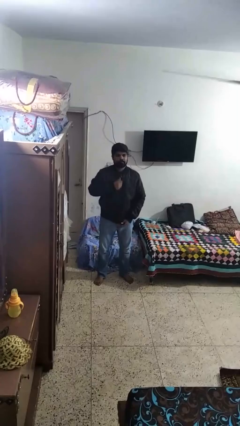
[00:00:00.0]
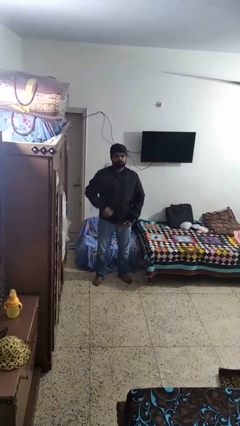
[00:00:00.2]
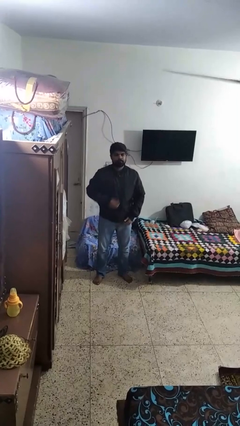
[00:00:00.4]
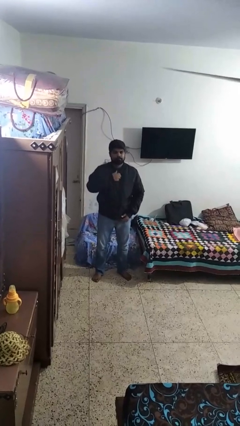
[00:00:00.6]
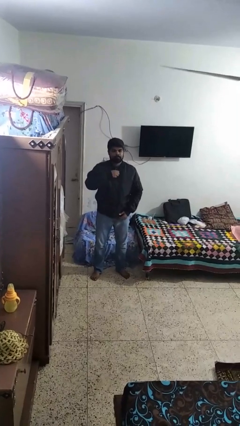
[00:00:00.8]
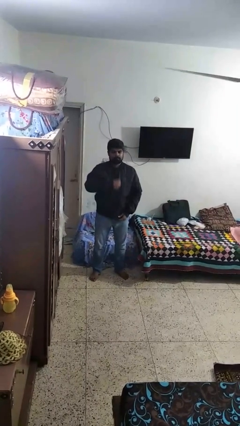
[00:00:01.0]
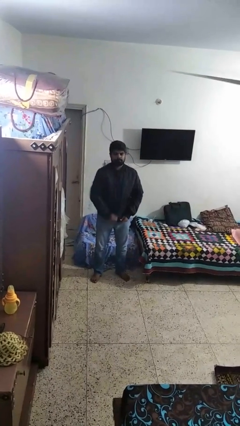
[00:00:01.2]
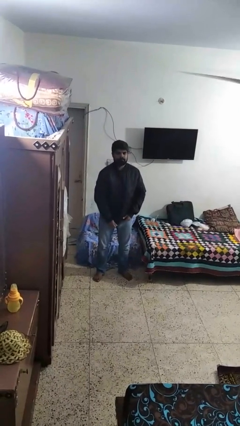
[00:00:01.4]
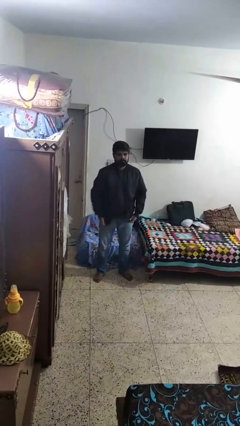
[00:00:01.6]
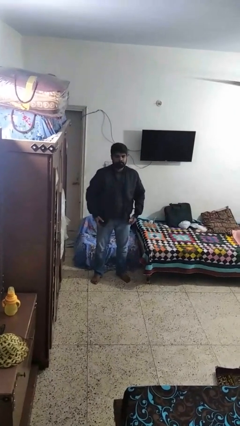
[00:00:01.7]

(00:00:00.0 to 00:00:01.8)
person unzips jacket

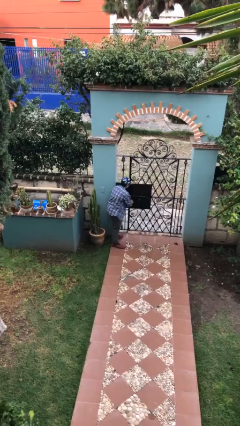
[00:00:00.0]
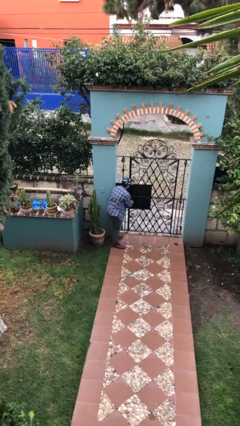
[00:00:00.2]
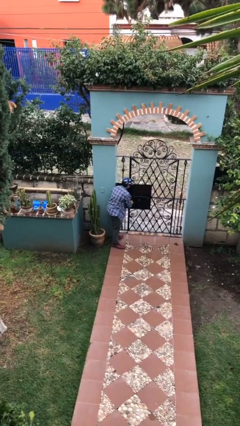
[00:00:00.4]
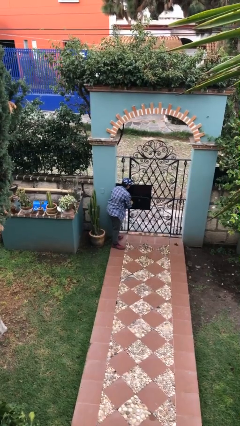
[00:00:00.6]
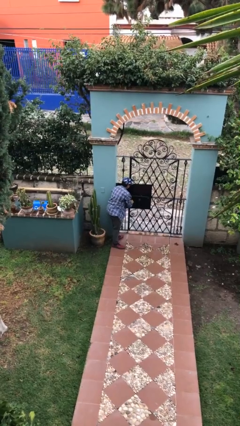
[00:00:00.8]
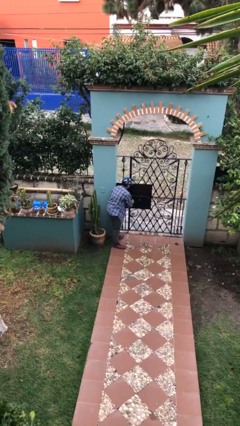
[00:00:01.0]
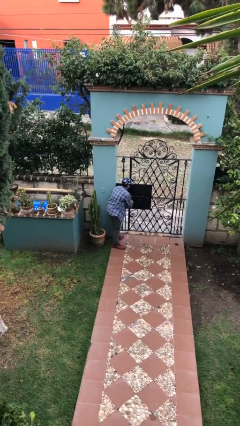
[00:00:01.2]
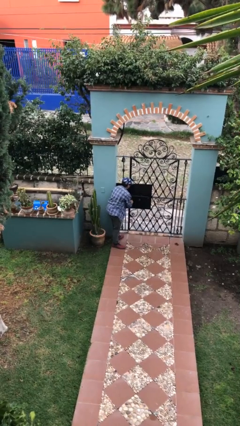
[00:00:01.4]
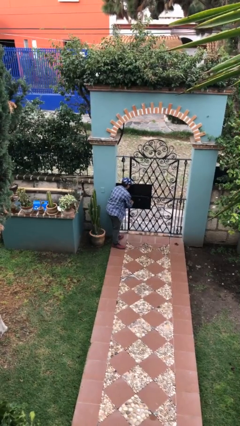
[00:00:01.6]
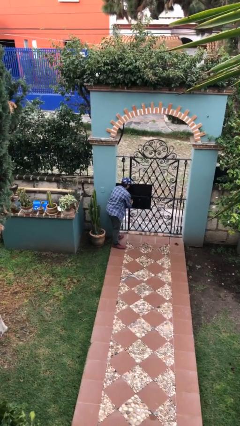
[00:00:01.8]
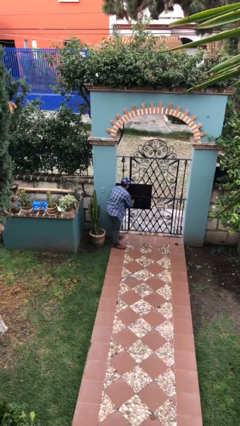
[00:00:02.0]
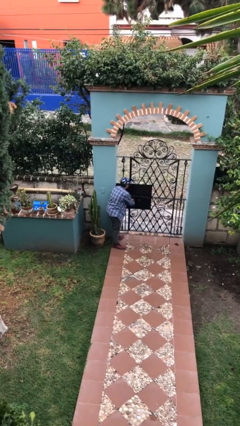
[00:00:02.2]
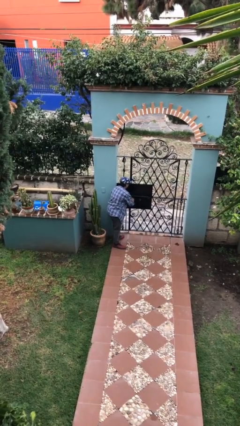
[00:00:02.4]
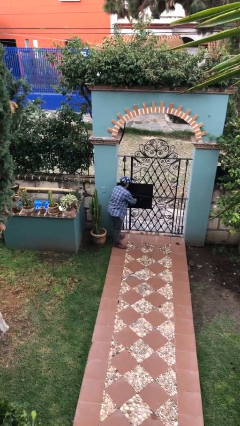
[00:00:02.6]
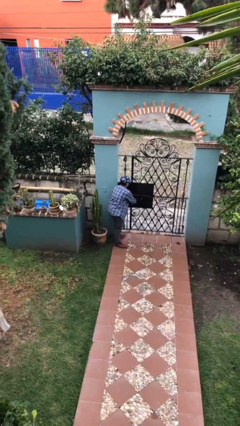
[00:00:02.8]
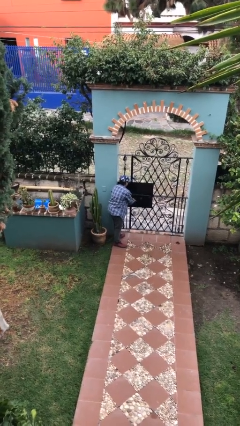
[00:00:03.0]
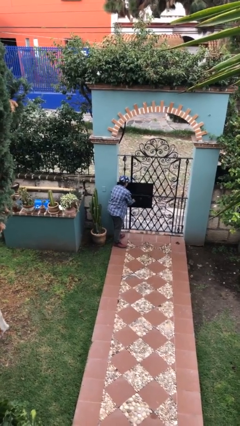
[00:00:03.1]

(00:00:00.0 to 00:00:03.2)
person locks door with keys

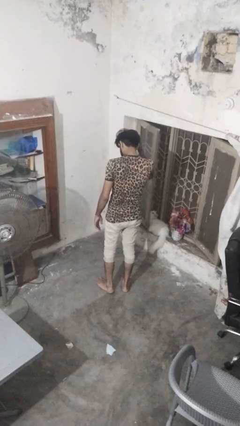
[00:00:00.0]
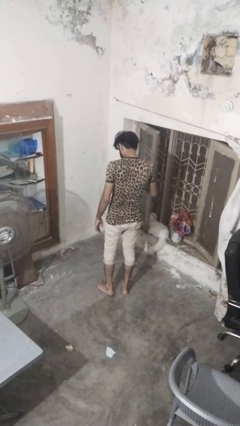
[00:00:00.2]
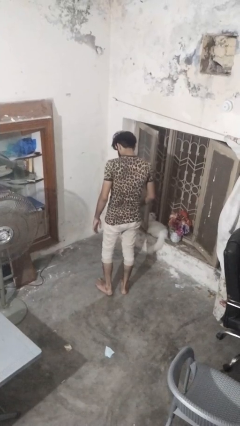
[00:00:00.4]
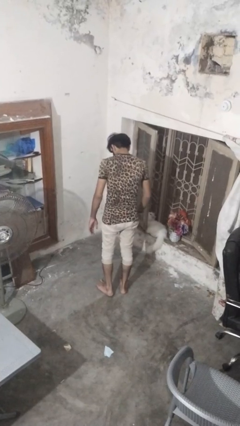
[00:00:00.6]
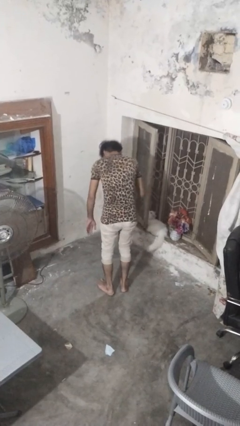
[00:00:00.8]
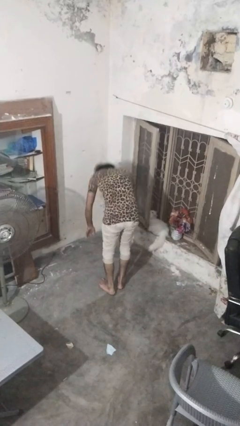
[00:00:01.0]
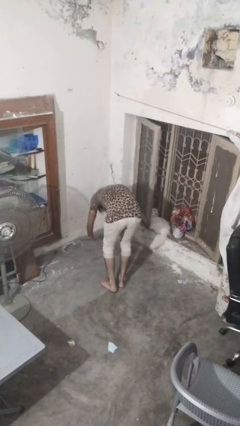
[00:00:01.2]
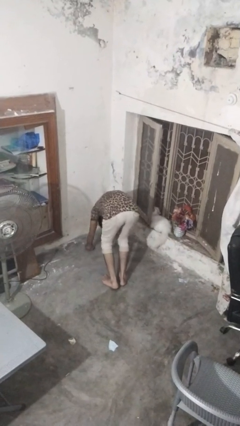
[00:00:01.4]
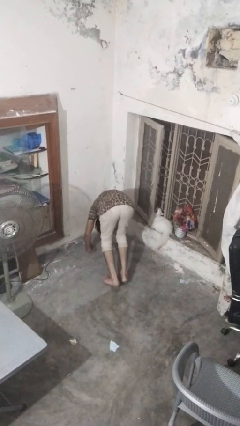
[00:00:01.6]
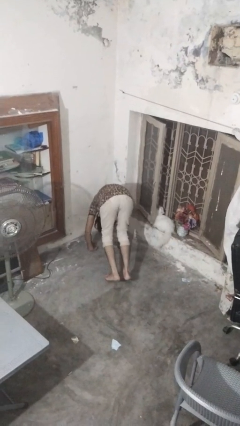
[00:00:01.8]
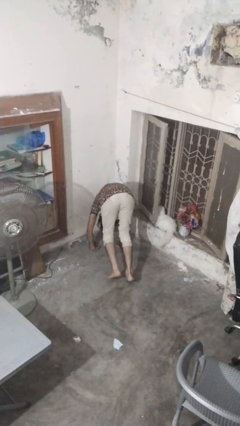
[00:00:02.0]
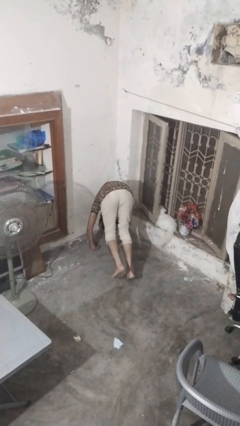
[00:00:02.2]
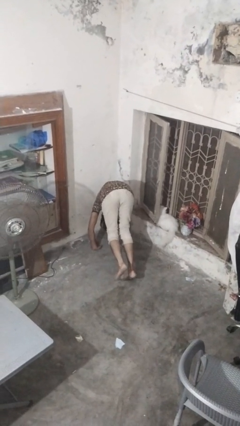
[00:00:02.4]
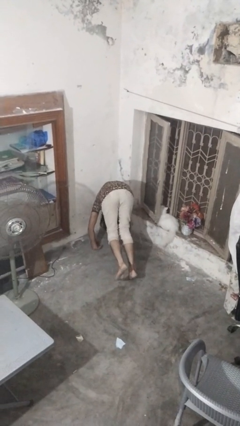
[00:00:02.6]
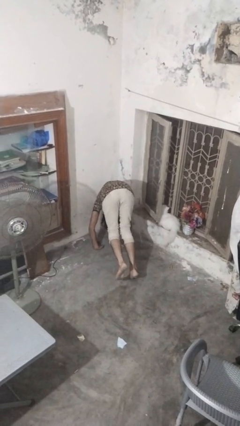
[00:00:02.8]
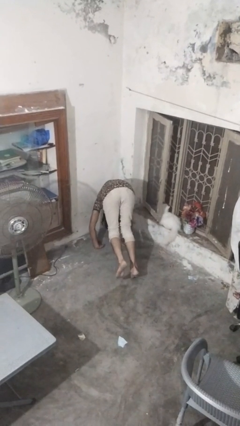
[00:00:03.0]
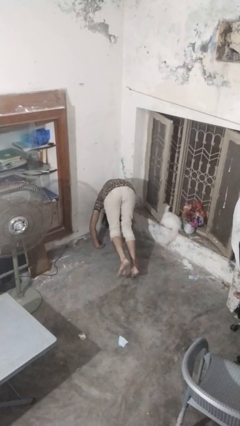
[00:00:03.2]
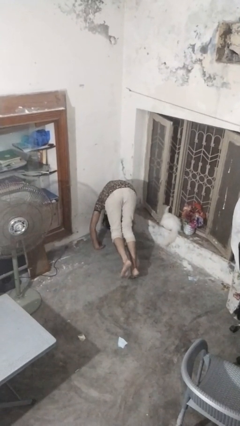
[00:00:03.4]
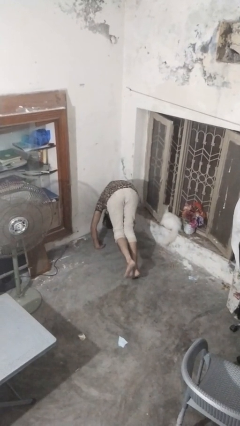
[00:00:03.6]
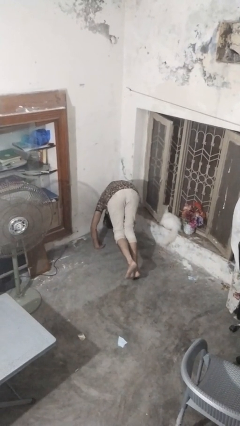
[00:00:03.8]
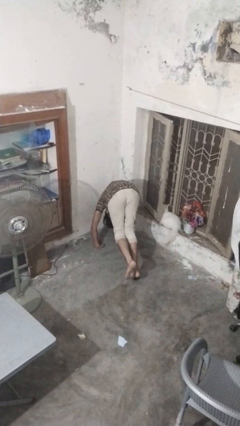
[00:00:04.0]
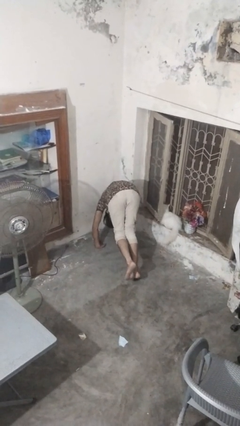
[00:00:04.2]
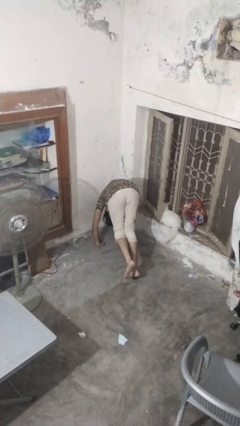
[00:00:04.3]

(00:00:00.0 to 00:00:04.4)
person handstand

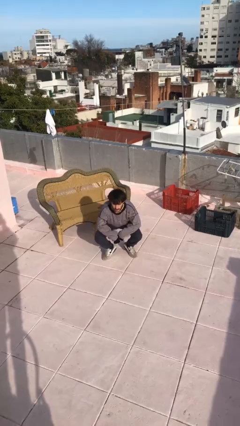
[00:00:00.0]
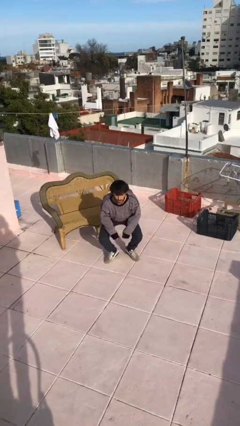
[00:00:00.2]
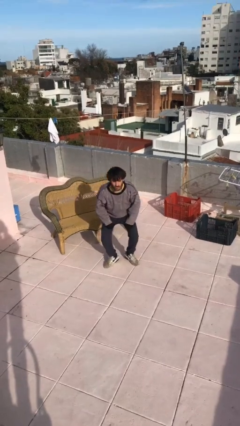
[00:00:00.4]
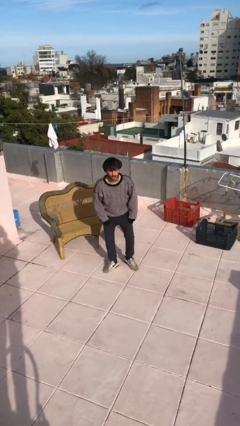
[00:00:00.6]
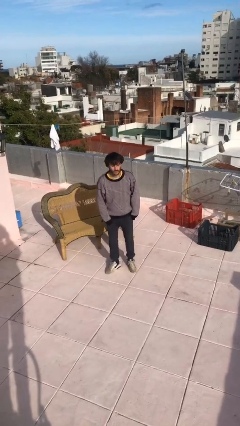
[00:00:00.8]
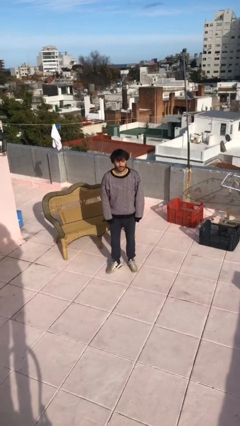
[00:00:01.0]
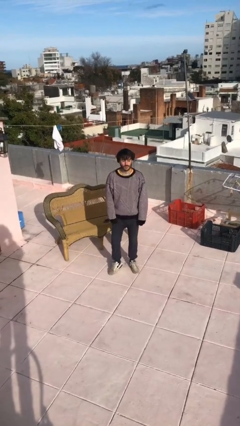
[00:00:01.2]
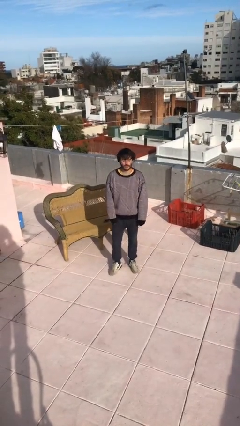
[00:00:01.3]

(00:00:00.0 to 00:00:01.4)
person stands up

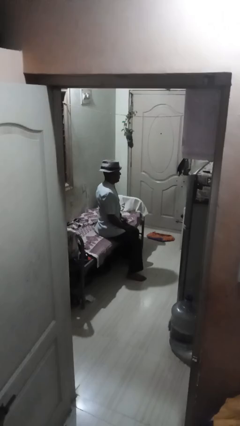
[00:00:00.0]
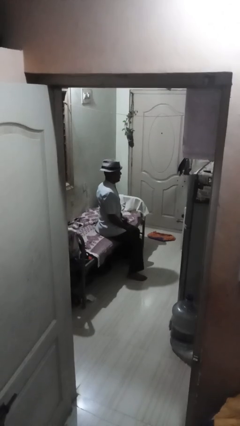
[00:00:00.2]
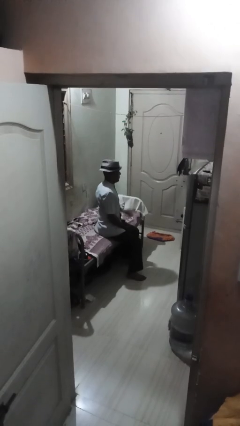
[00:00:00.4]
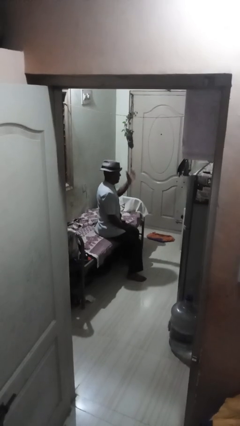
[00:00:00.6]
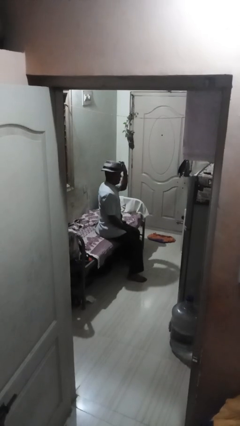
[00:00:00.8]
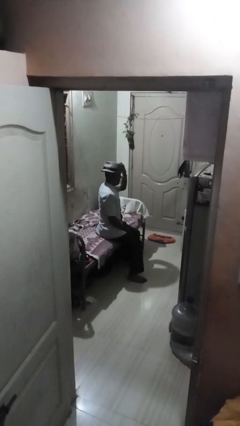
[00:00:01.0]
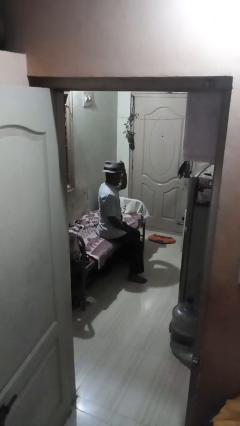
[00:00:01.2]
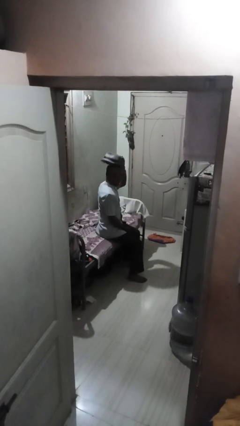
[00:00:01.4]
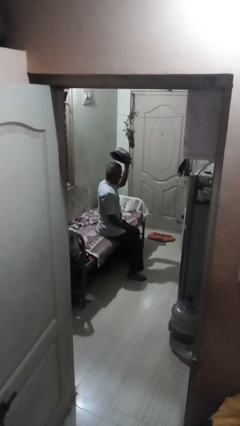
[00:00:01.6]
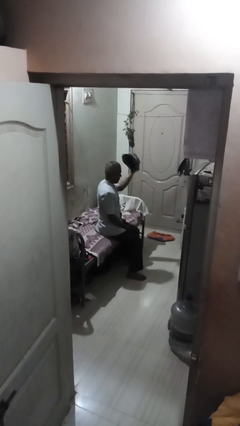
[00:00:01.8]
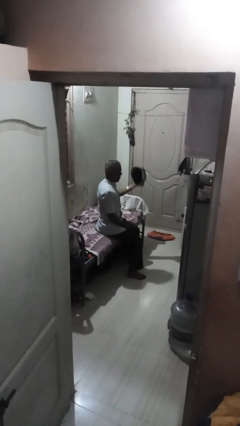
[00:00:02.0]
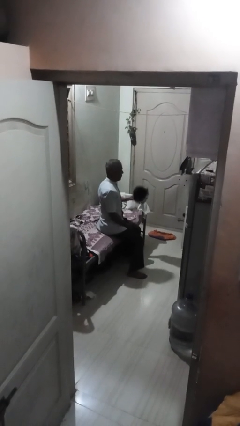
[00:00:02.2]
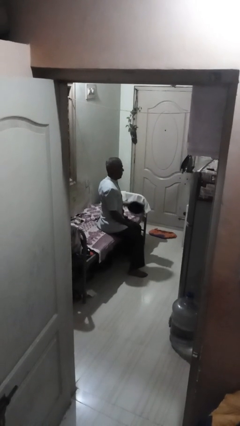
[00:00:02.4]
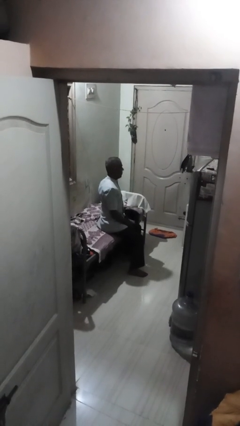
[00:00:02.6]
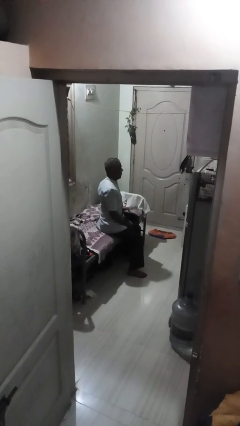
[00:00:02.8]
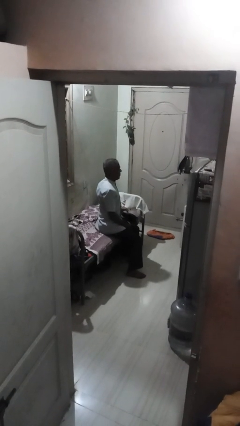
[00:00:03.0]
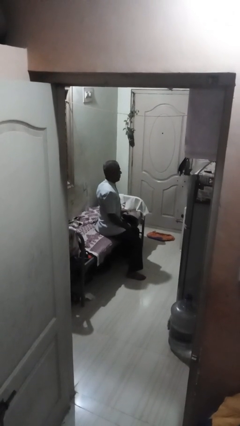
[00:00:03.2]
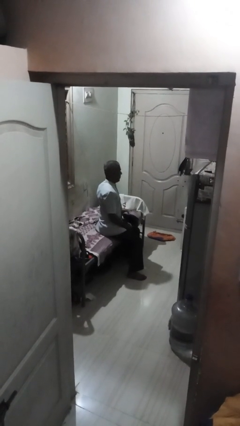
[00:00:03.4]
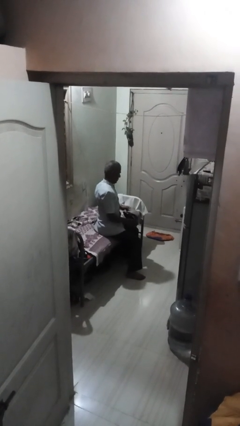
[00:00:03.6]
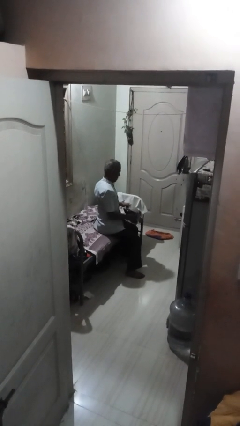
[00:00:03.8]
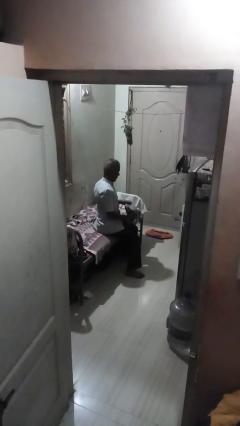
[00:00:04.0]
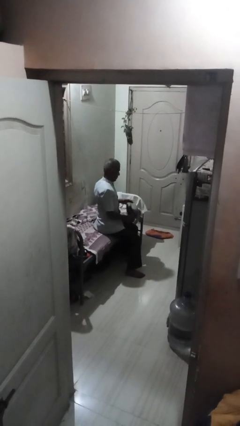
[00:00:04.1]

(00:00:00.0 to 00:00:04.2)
person takes off hat

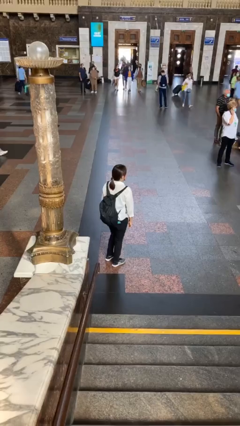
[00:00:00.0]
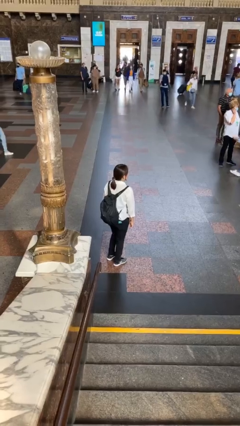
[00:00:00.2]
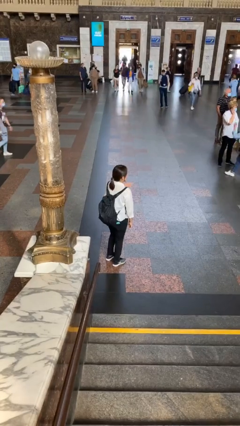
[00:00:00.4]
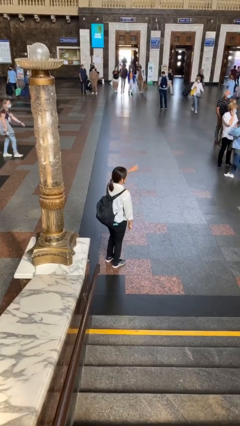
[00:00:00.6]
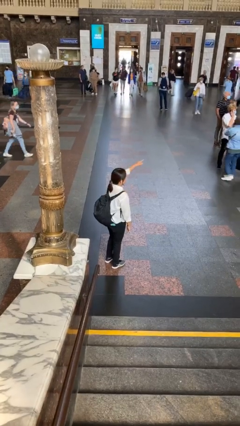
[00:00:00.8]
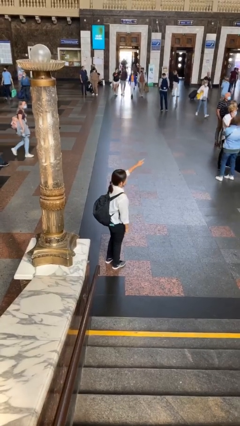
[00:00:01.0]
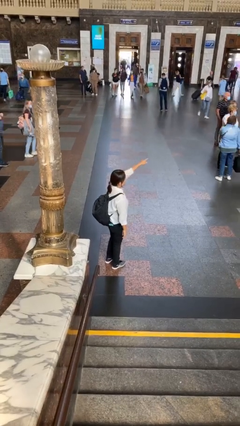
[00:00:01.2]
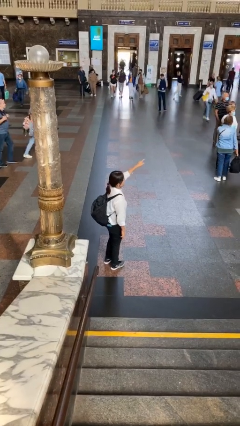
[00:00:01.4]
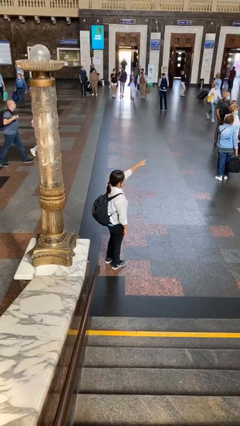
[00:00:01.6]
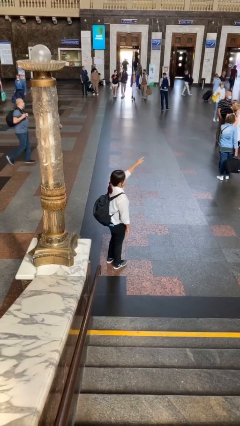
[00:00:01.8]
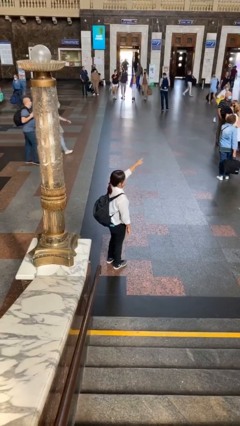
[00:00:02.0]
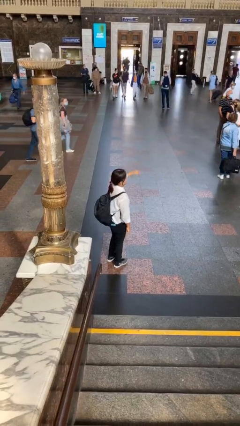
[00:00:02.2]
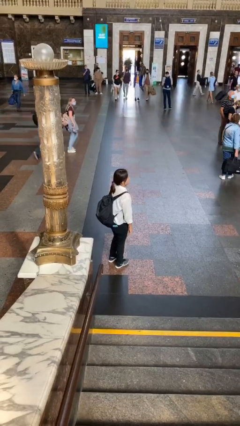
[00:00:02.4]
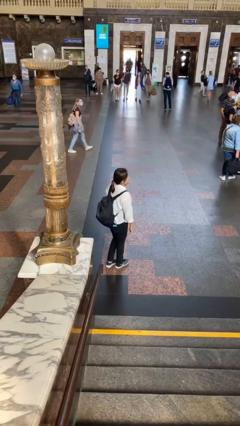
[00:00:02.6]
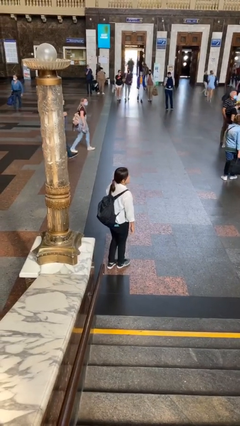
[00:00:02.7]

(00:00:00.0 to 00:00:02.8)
person points at person
